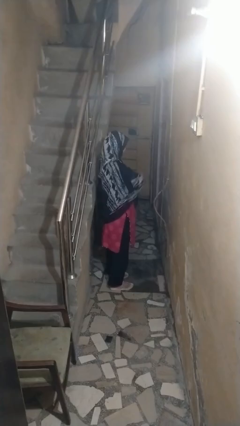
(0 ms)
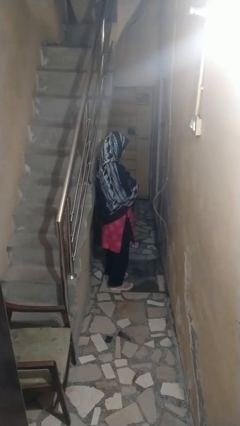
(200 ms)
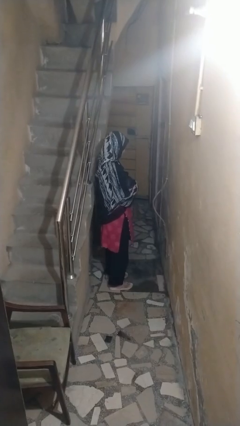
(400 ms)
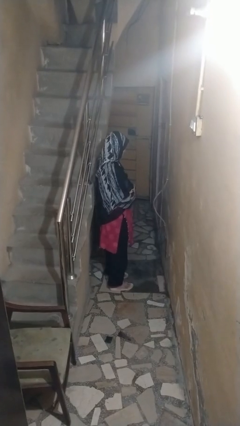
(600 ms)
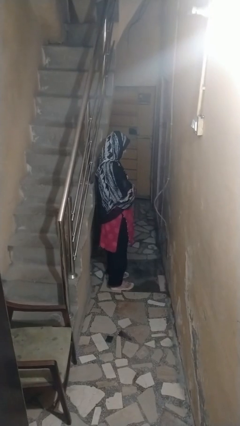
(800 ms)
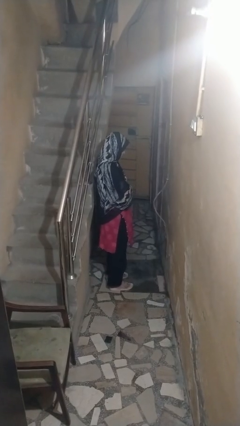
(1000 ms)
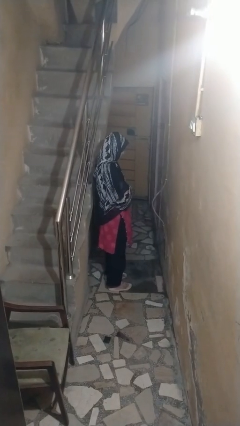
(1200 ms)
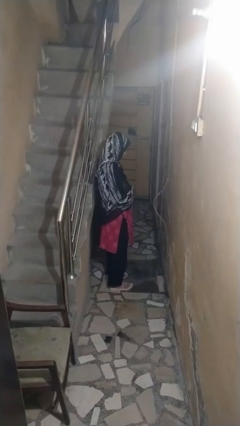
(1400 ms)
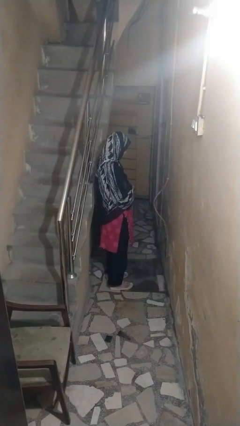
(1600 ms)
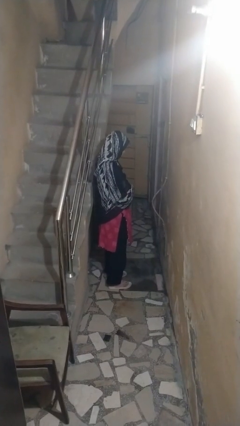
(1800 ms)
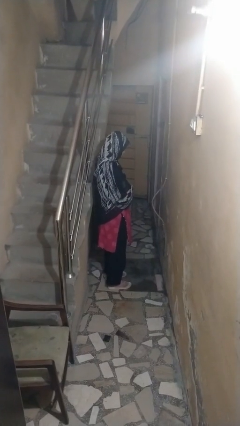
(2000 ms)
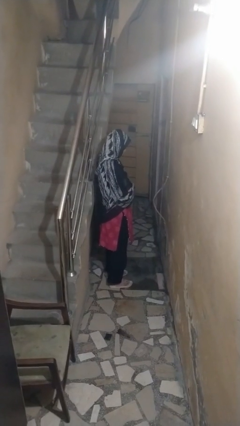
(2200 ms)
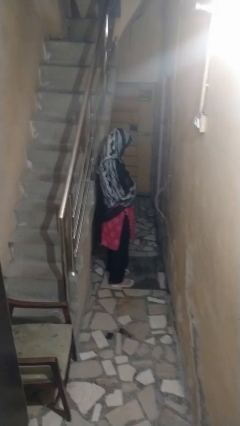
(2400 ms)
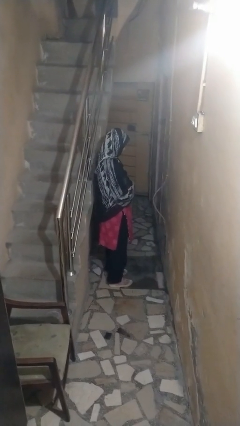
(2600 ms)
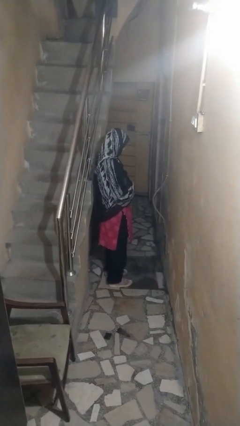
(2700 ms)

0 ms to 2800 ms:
person crosses arms

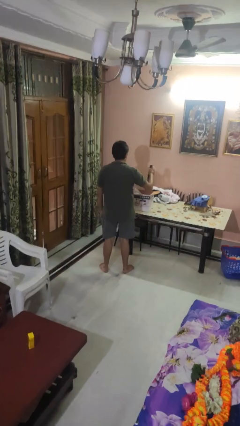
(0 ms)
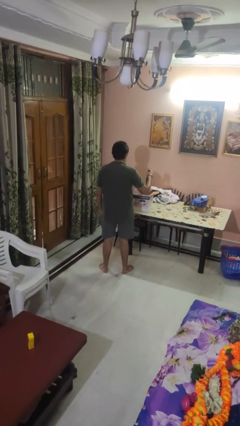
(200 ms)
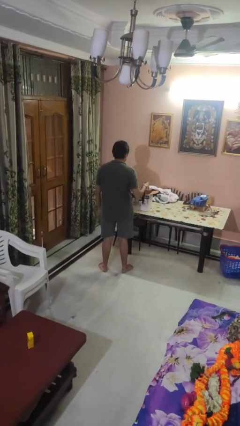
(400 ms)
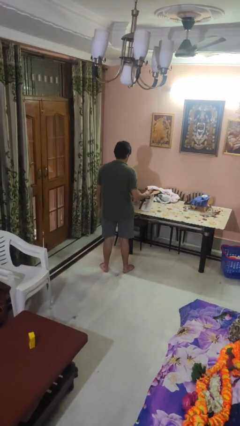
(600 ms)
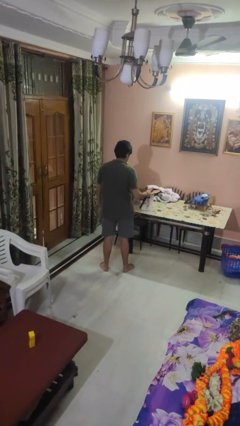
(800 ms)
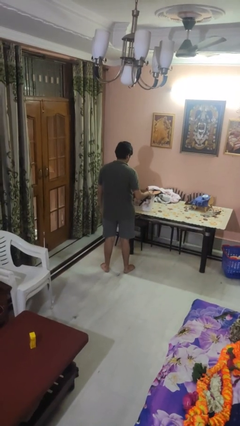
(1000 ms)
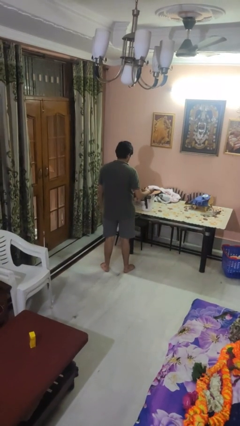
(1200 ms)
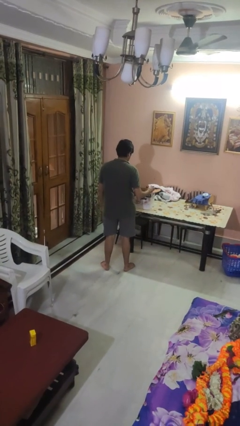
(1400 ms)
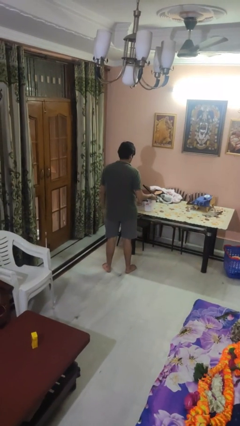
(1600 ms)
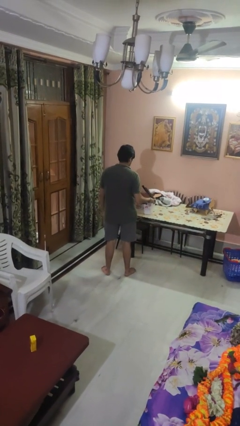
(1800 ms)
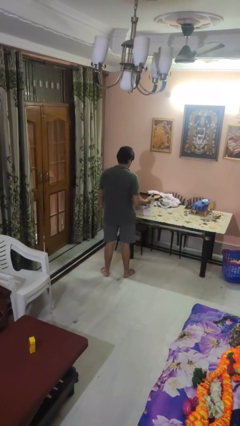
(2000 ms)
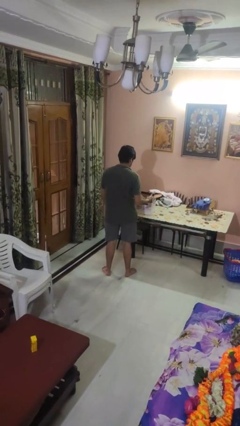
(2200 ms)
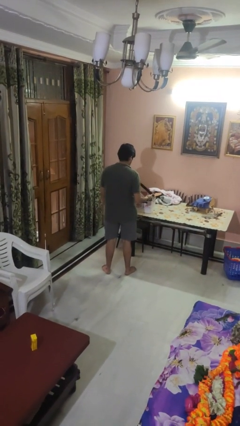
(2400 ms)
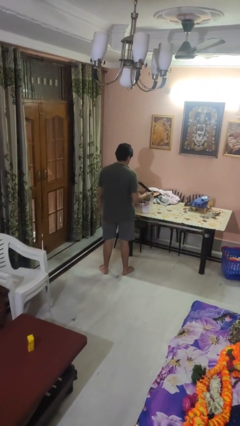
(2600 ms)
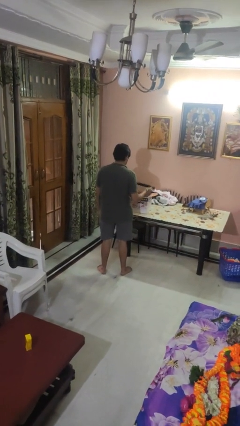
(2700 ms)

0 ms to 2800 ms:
person takes object from box

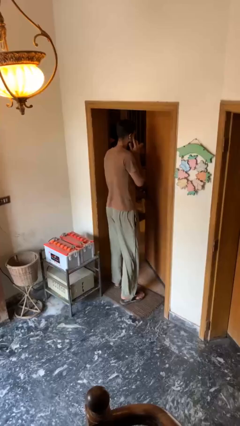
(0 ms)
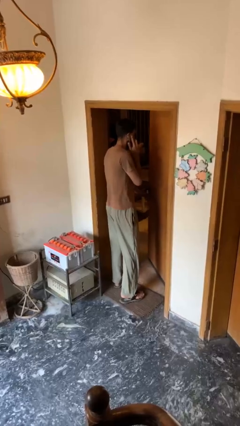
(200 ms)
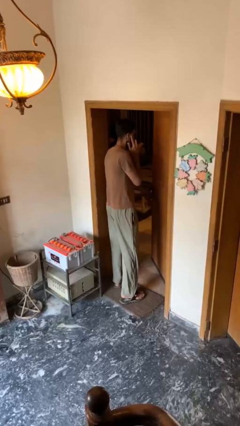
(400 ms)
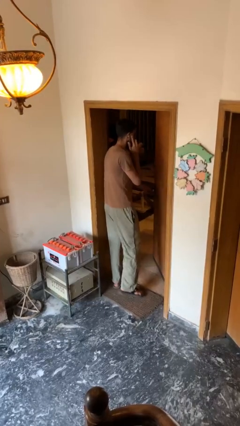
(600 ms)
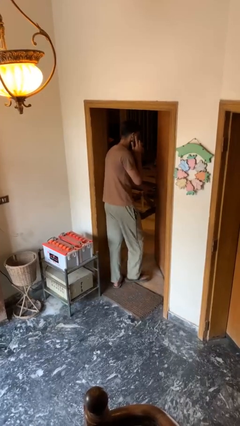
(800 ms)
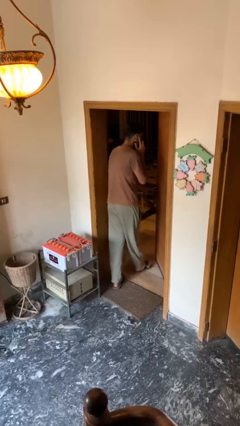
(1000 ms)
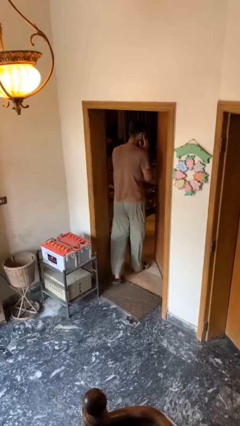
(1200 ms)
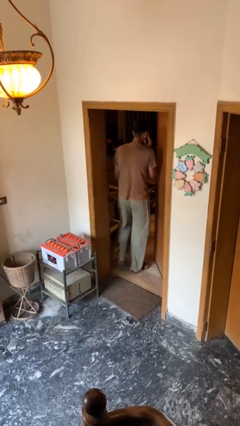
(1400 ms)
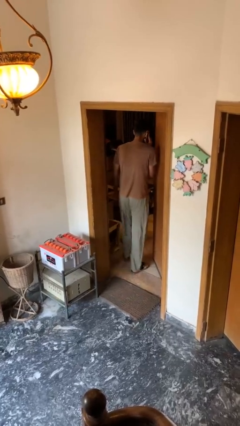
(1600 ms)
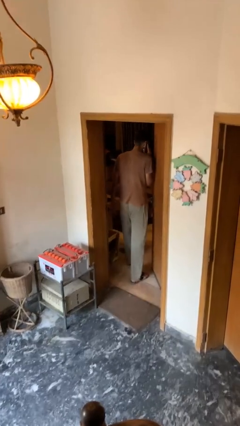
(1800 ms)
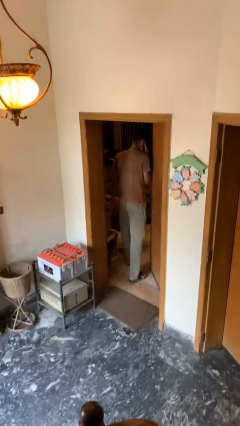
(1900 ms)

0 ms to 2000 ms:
person exits scene through structure

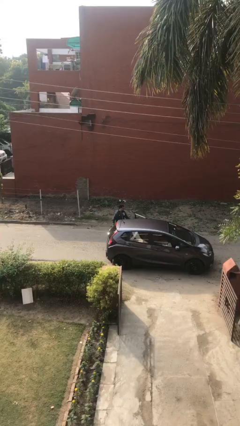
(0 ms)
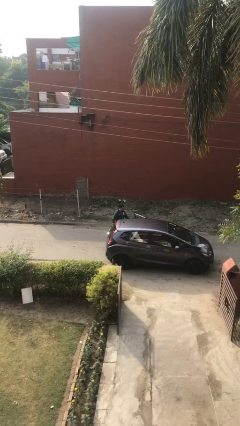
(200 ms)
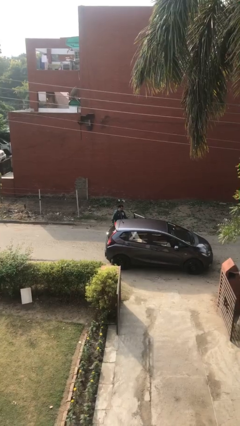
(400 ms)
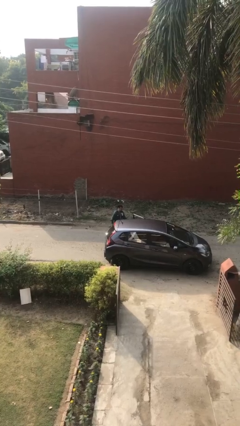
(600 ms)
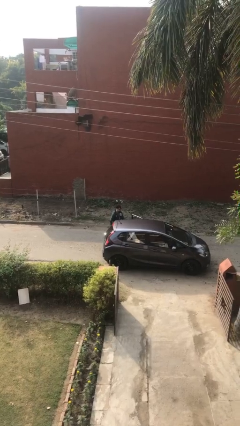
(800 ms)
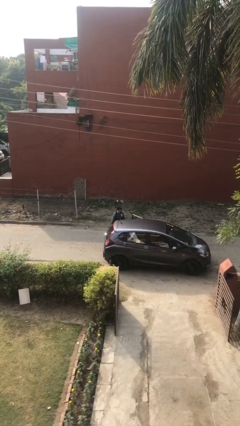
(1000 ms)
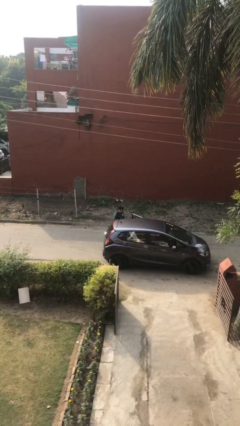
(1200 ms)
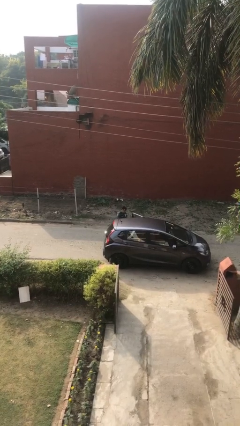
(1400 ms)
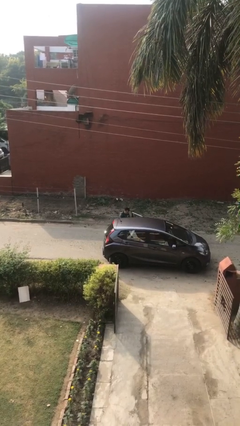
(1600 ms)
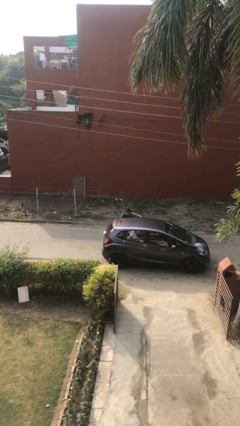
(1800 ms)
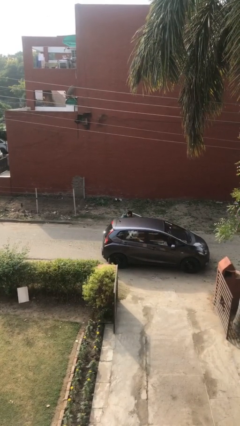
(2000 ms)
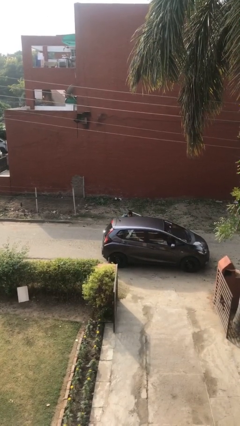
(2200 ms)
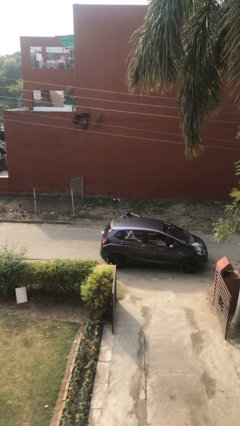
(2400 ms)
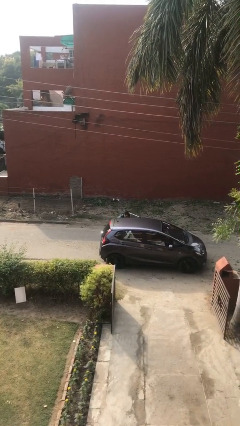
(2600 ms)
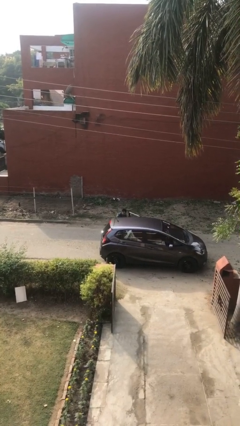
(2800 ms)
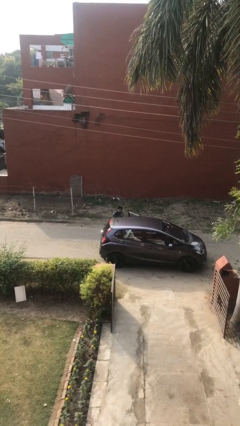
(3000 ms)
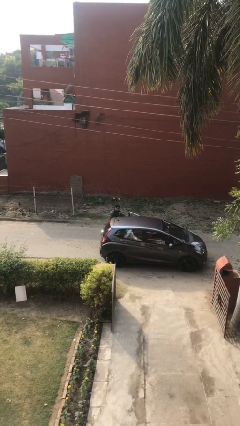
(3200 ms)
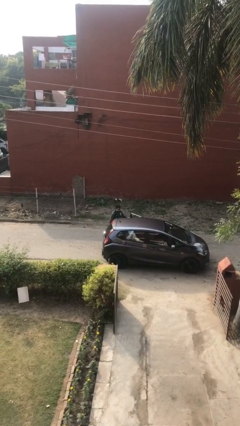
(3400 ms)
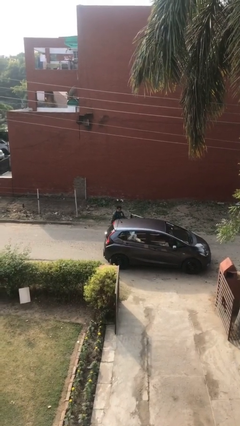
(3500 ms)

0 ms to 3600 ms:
person loads car

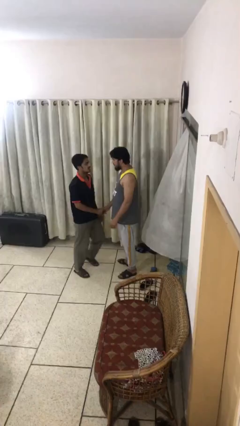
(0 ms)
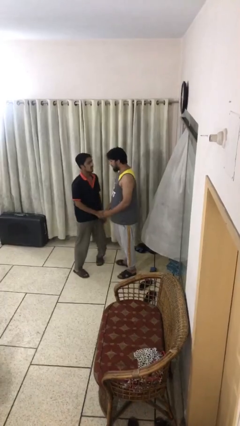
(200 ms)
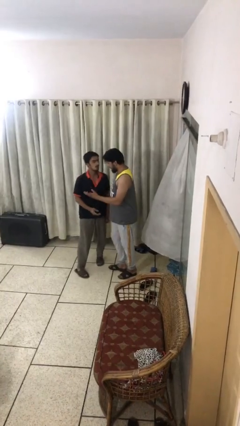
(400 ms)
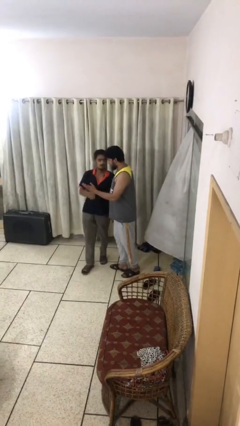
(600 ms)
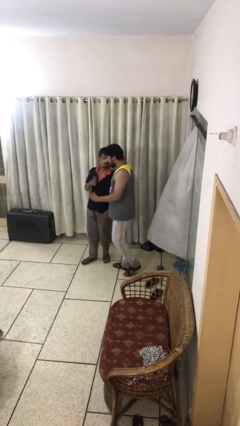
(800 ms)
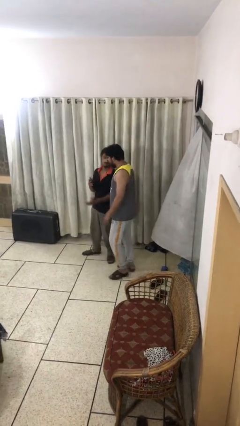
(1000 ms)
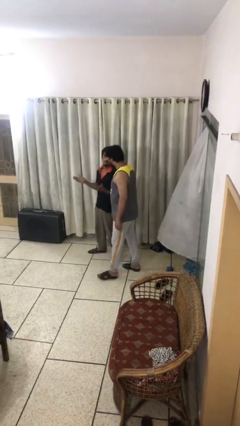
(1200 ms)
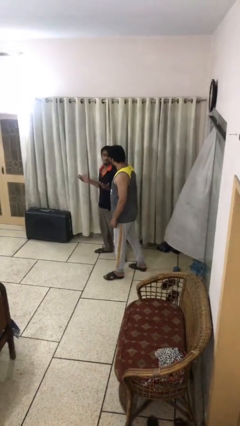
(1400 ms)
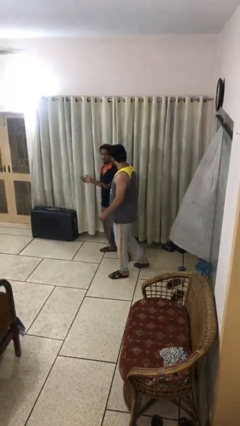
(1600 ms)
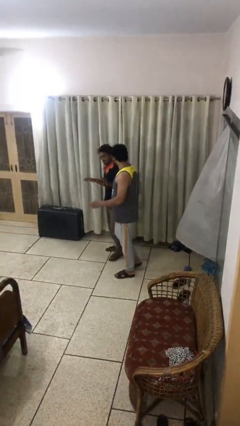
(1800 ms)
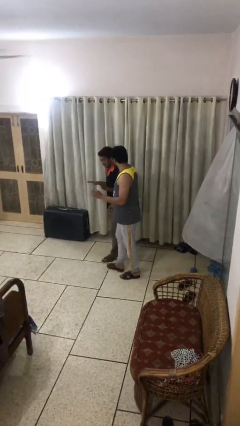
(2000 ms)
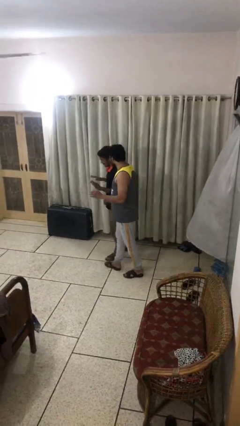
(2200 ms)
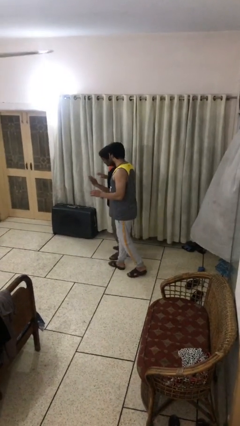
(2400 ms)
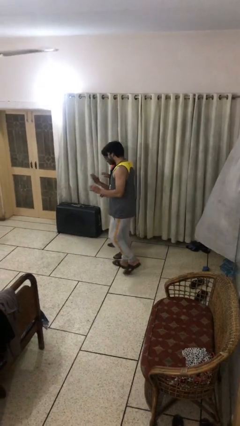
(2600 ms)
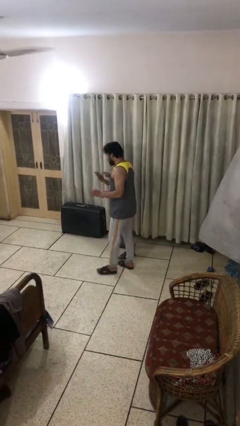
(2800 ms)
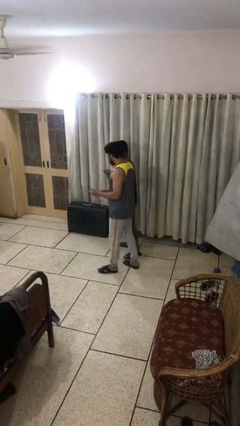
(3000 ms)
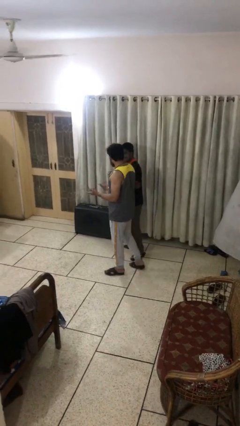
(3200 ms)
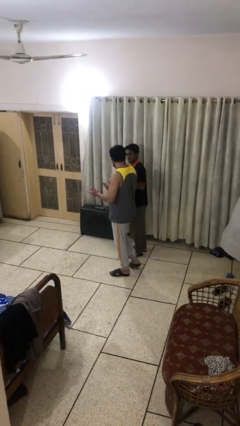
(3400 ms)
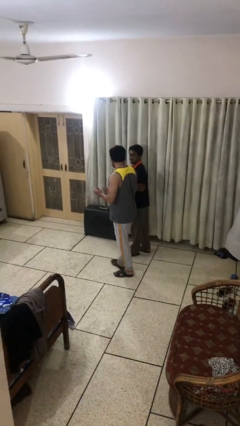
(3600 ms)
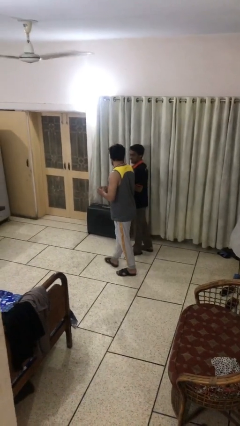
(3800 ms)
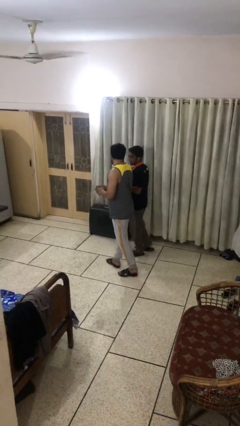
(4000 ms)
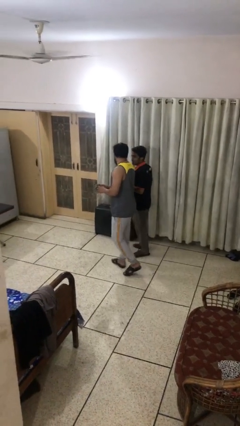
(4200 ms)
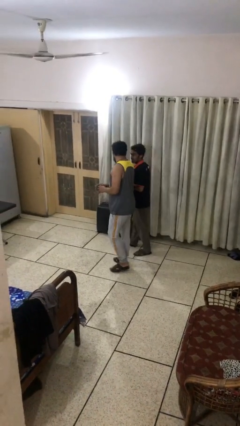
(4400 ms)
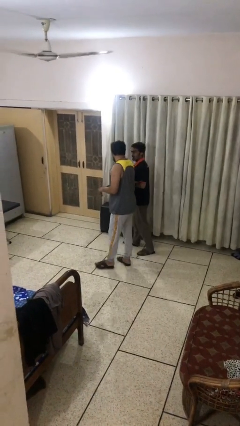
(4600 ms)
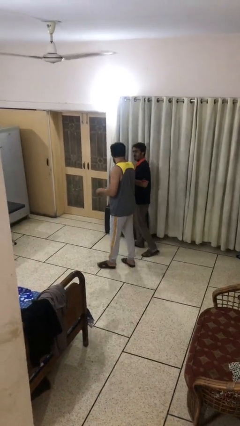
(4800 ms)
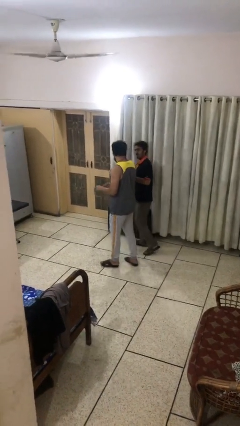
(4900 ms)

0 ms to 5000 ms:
person talks to person

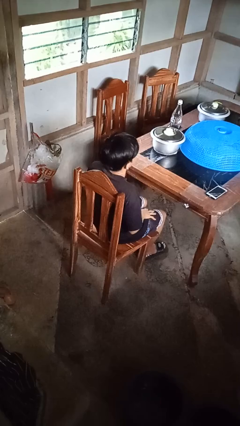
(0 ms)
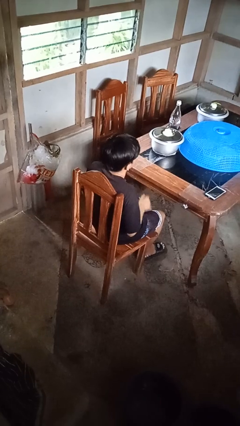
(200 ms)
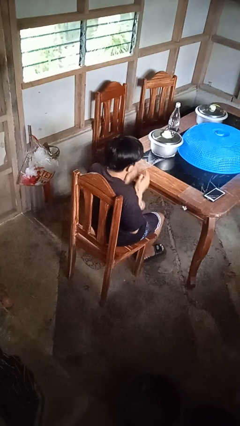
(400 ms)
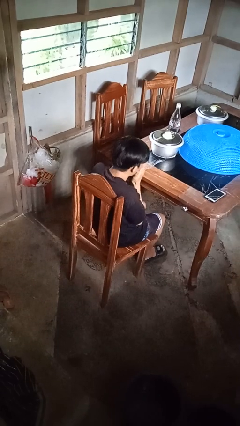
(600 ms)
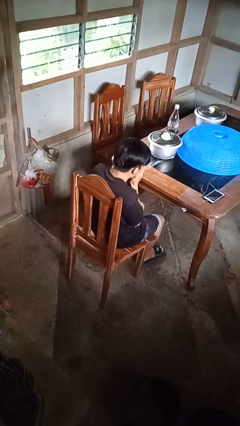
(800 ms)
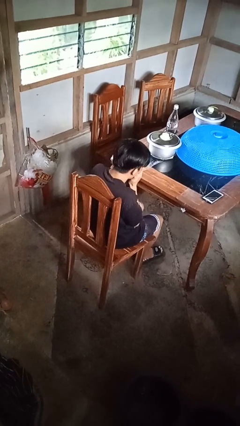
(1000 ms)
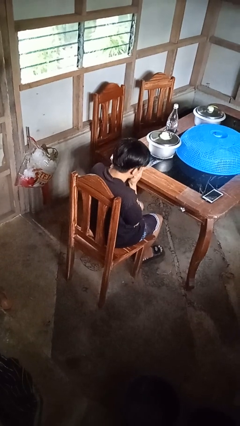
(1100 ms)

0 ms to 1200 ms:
person sneezes into hand
